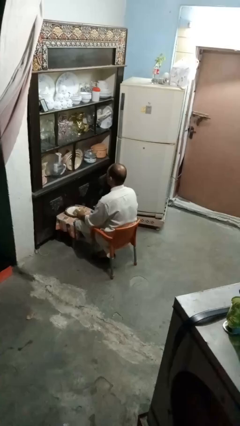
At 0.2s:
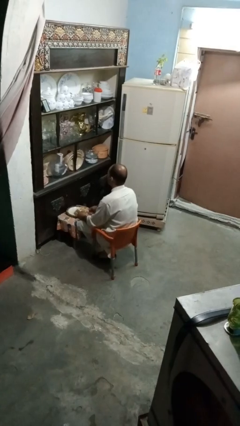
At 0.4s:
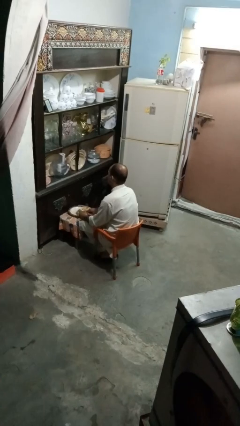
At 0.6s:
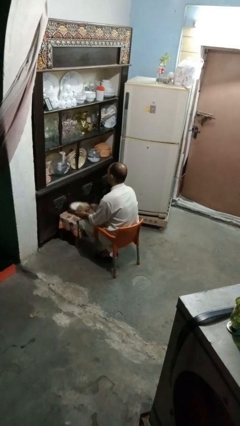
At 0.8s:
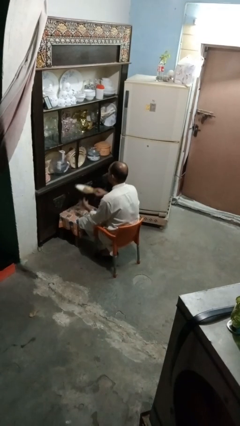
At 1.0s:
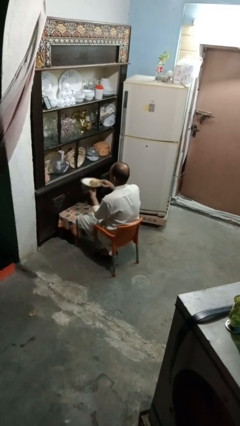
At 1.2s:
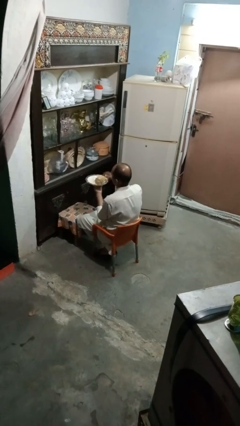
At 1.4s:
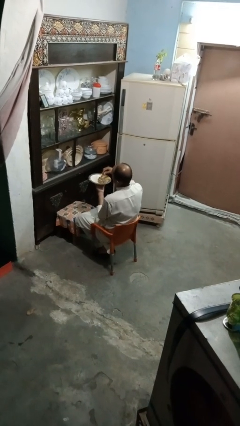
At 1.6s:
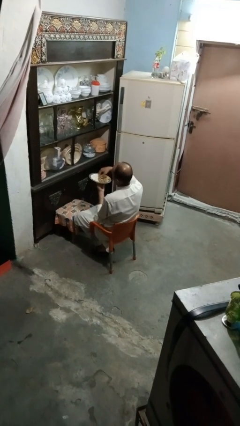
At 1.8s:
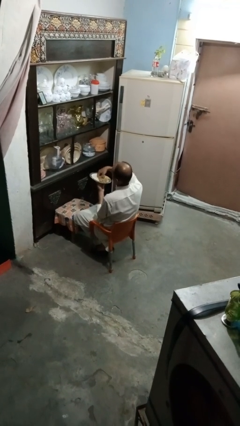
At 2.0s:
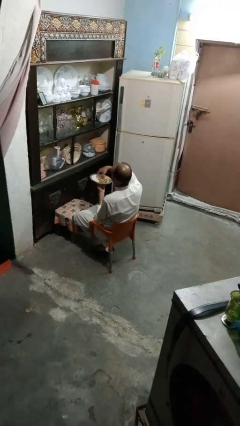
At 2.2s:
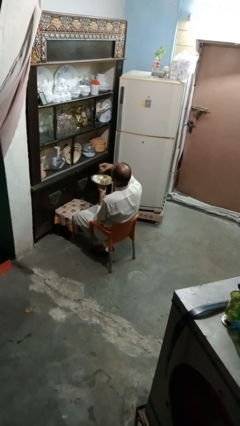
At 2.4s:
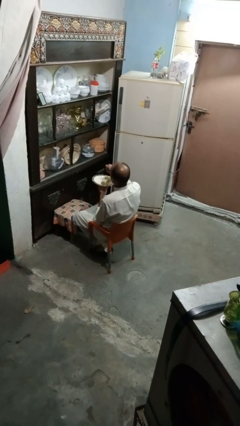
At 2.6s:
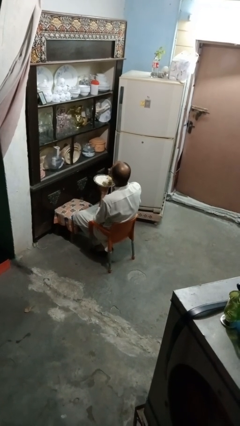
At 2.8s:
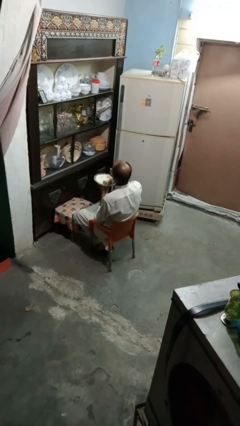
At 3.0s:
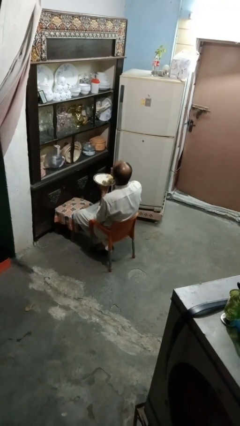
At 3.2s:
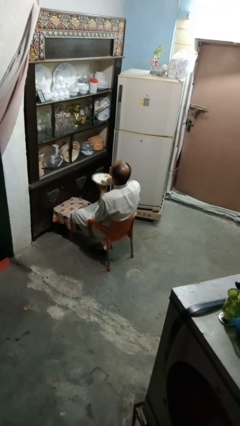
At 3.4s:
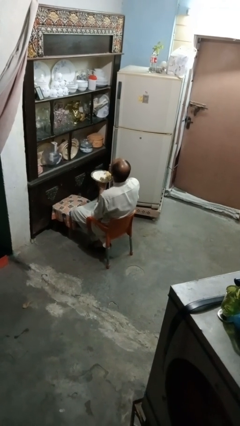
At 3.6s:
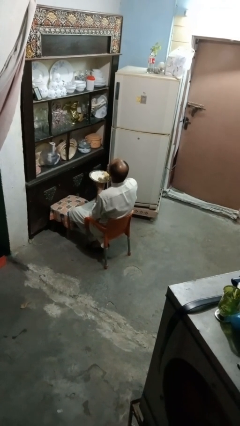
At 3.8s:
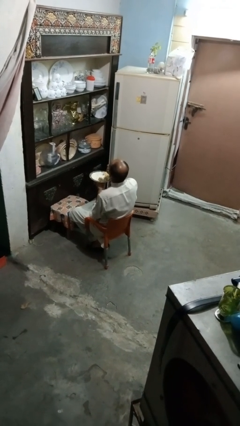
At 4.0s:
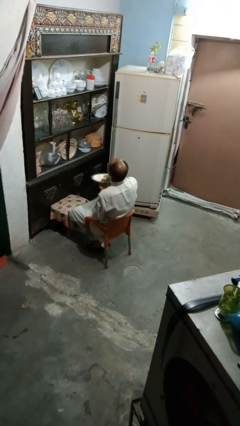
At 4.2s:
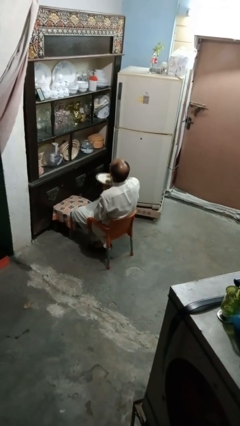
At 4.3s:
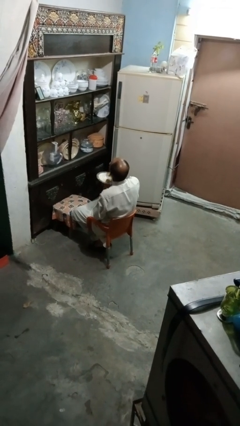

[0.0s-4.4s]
person eats with hands

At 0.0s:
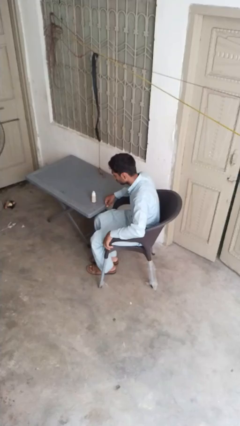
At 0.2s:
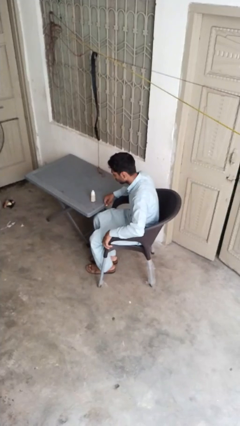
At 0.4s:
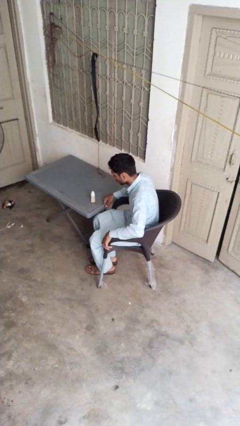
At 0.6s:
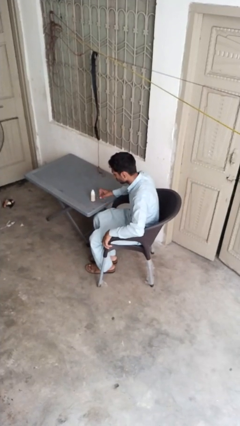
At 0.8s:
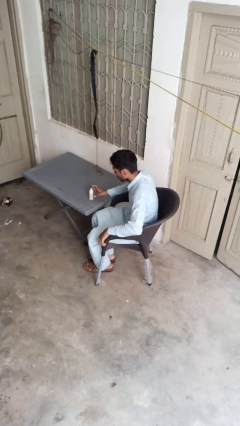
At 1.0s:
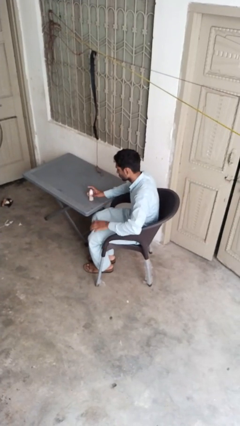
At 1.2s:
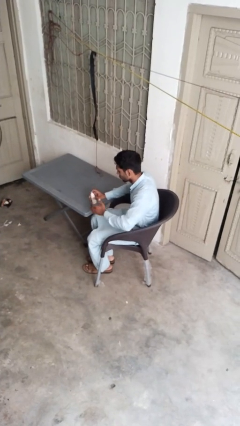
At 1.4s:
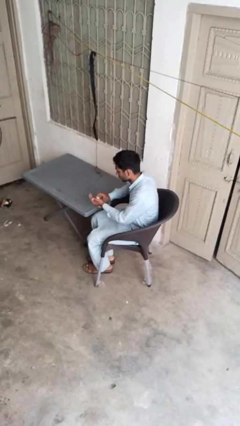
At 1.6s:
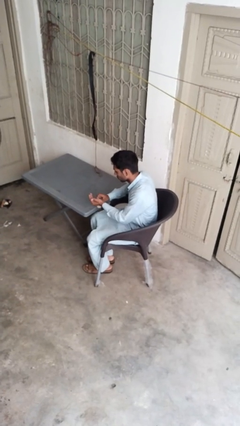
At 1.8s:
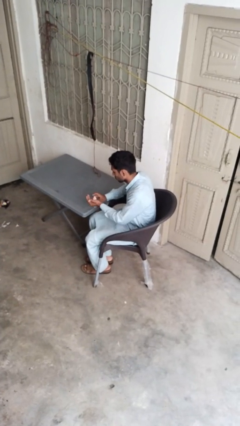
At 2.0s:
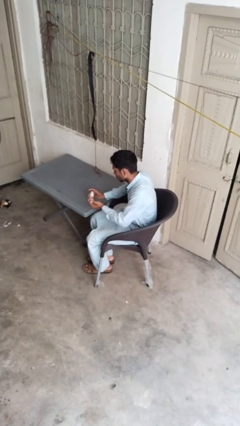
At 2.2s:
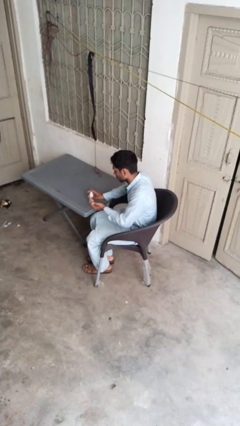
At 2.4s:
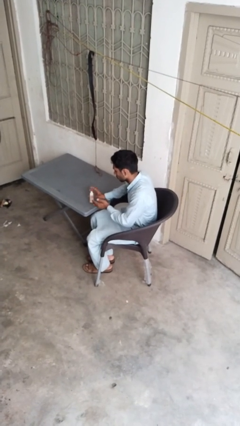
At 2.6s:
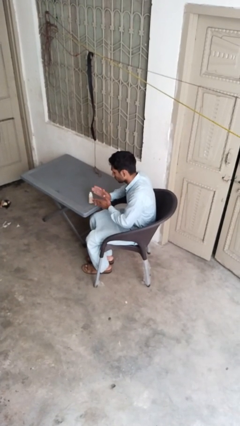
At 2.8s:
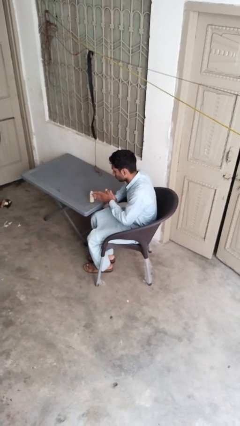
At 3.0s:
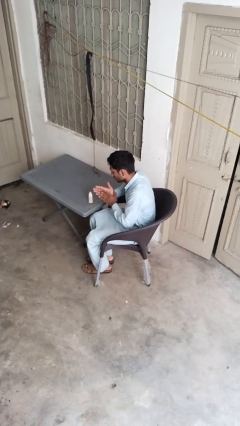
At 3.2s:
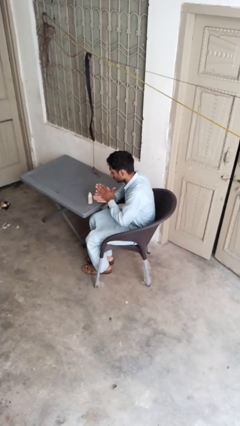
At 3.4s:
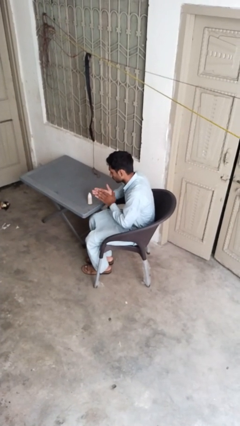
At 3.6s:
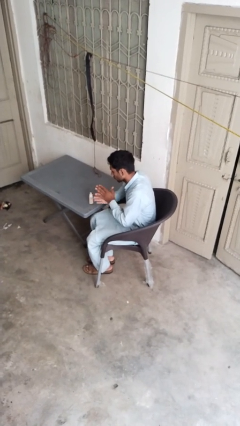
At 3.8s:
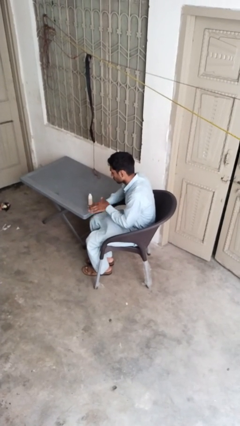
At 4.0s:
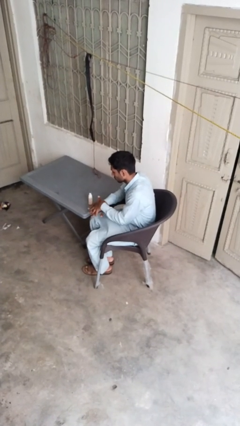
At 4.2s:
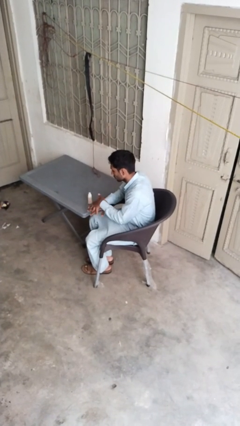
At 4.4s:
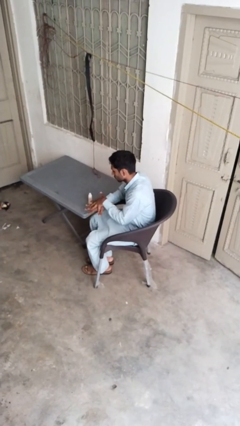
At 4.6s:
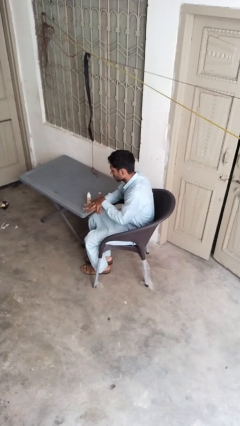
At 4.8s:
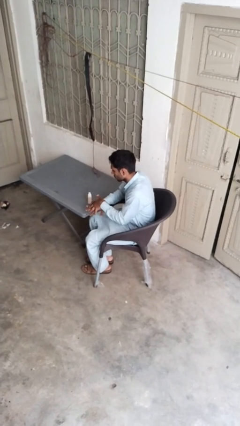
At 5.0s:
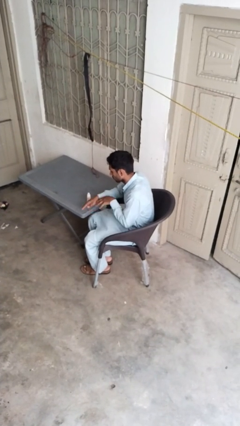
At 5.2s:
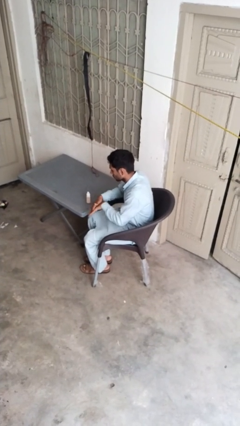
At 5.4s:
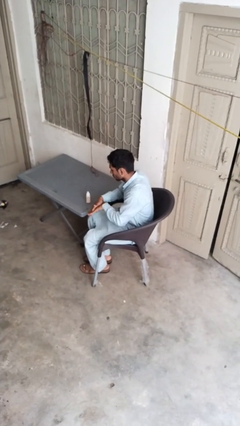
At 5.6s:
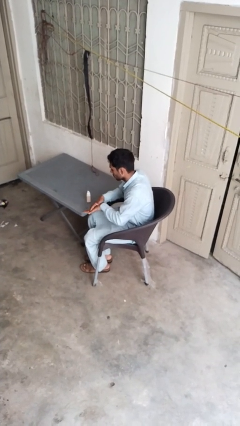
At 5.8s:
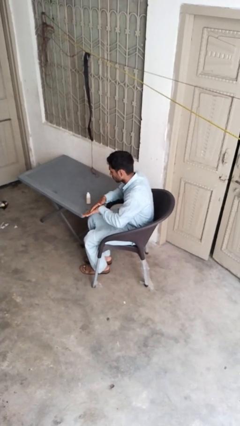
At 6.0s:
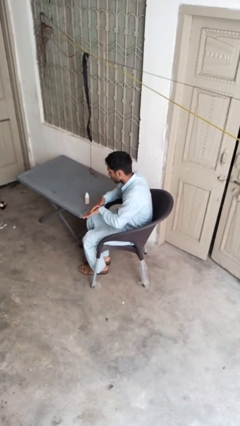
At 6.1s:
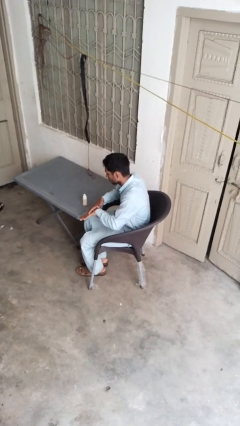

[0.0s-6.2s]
person applies facial moisturizer

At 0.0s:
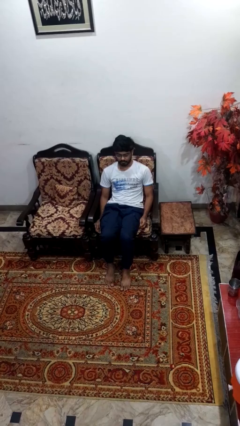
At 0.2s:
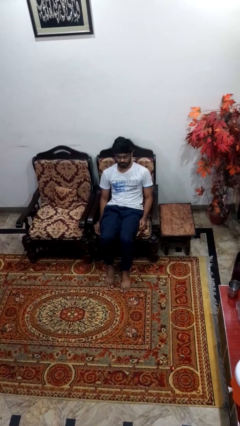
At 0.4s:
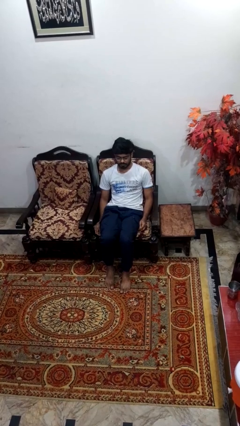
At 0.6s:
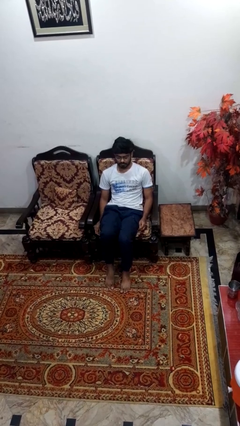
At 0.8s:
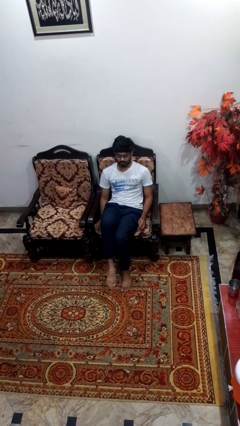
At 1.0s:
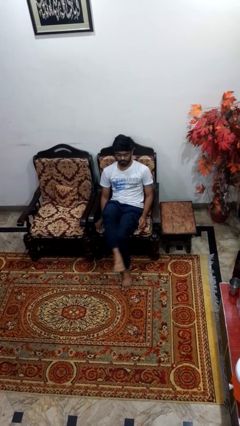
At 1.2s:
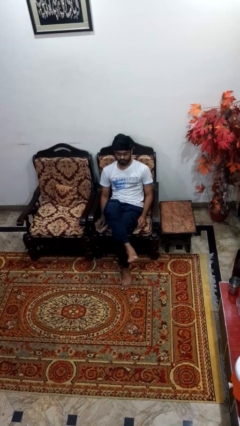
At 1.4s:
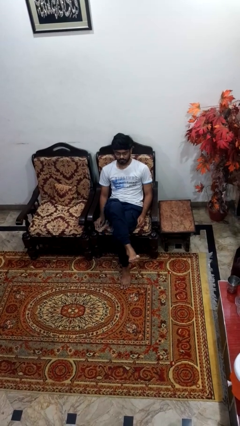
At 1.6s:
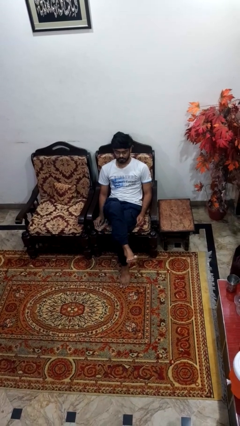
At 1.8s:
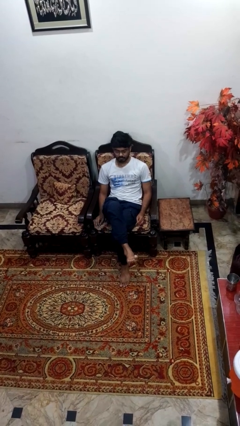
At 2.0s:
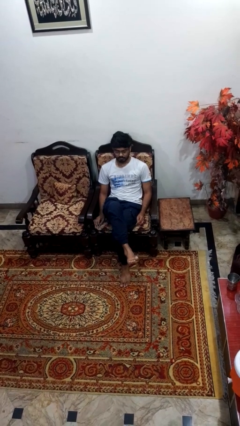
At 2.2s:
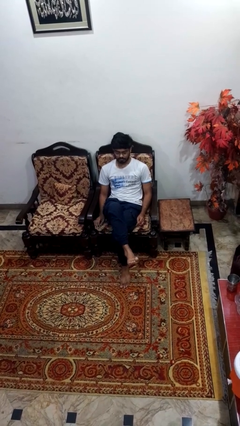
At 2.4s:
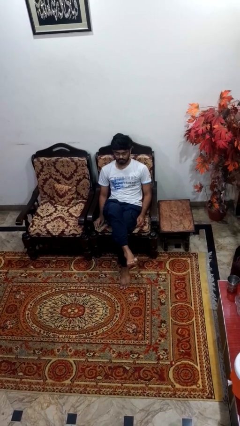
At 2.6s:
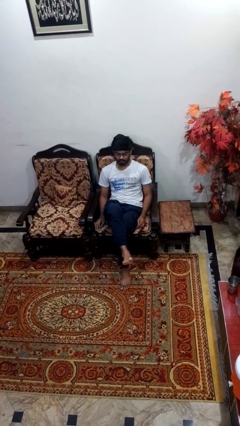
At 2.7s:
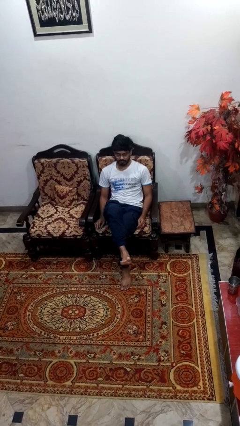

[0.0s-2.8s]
person crosses legs

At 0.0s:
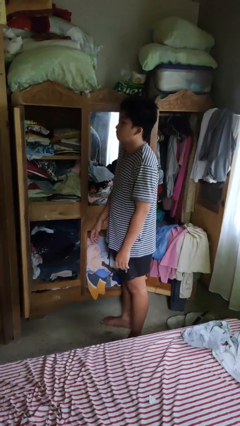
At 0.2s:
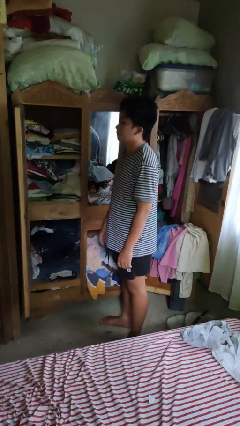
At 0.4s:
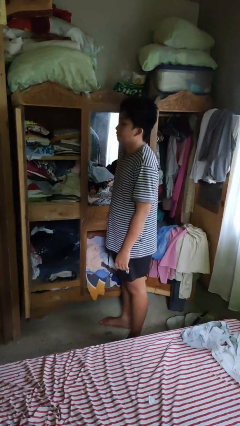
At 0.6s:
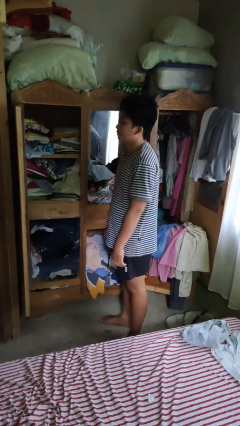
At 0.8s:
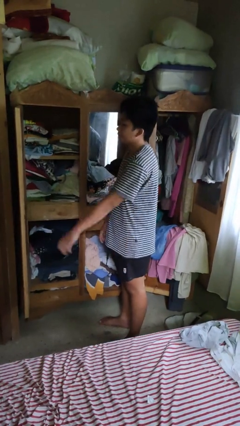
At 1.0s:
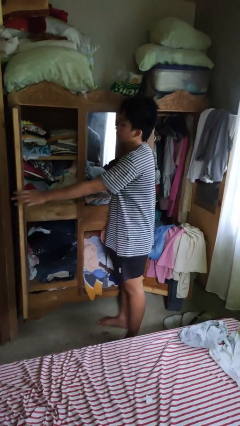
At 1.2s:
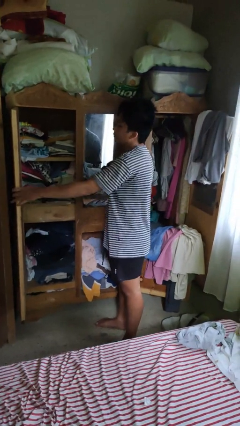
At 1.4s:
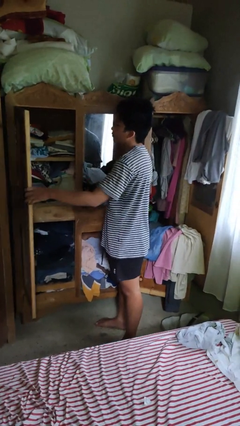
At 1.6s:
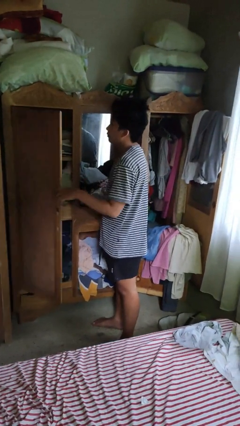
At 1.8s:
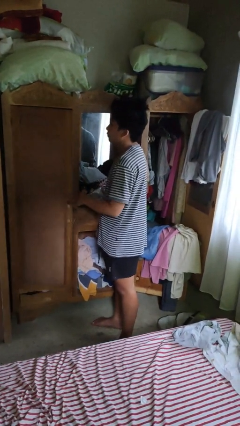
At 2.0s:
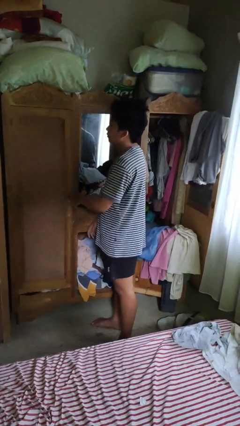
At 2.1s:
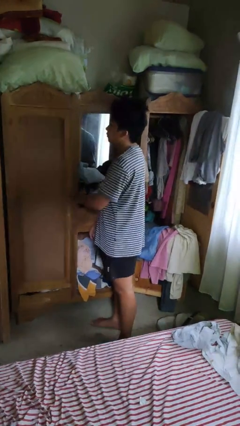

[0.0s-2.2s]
person closes dresser drawer

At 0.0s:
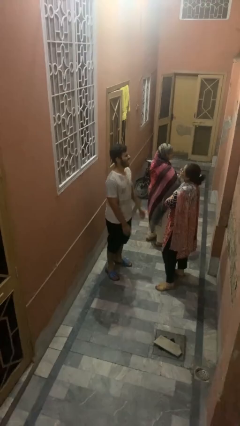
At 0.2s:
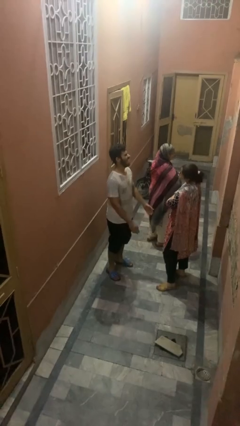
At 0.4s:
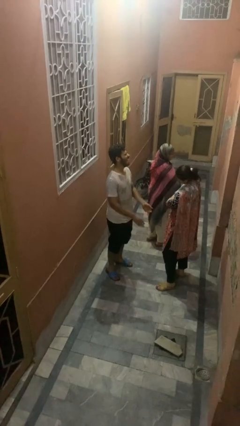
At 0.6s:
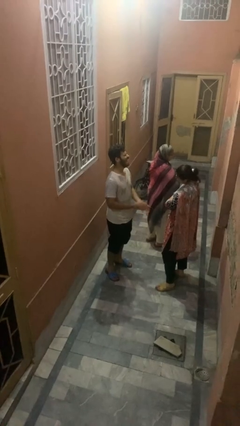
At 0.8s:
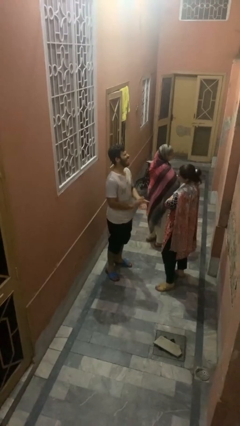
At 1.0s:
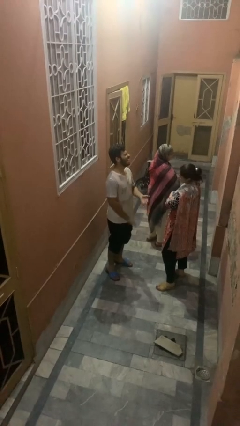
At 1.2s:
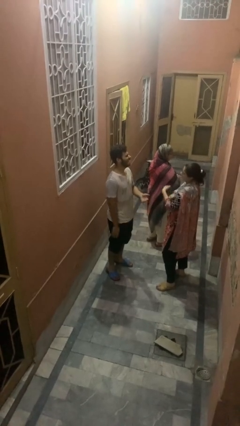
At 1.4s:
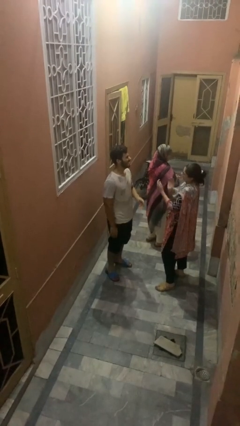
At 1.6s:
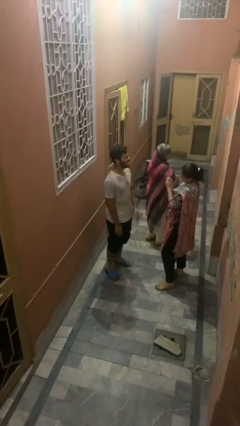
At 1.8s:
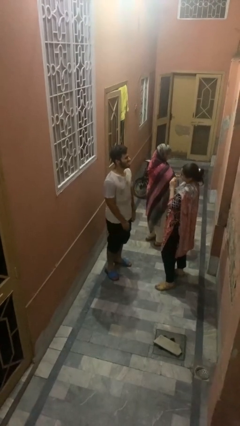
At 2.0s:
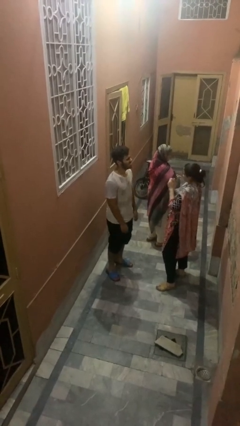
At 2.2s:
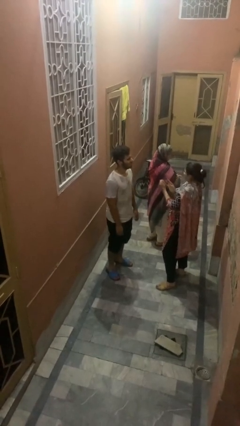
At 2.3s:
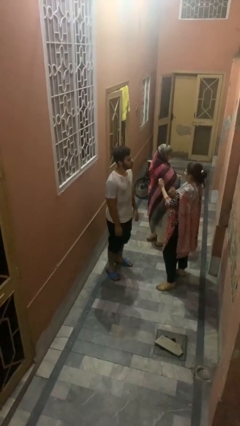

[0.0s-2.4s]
person laughs with person

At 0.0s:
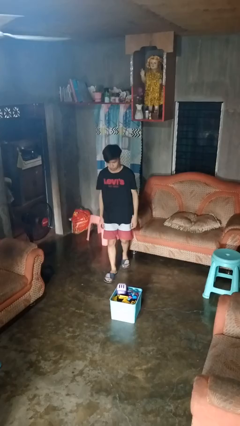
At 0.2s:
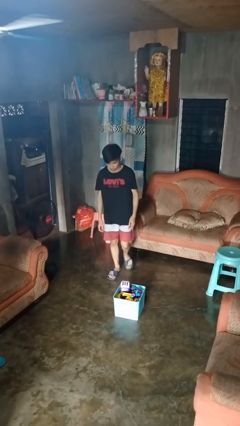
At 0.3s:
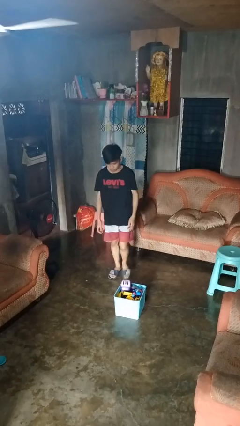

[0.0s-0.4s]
person trips on object on floor
